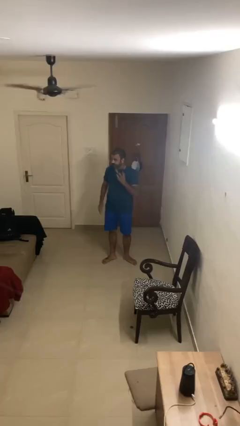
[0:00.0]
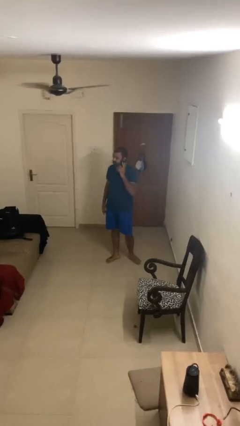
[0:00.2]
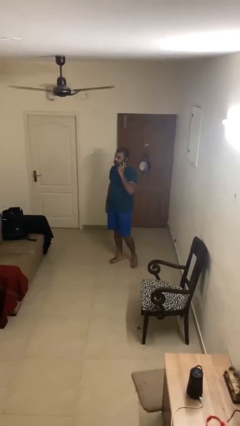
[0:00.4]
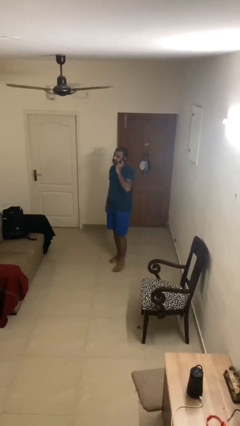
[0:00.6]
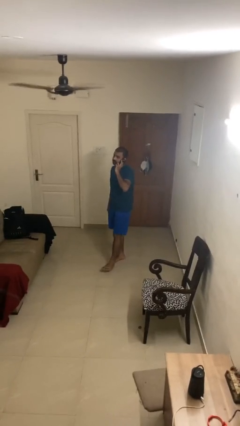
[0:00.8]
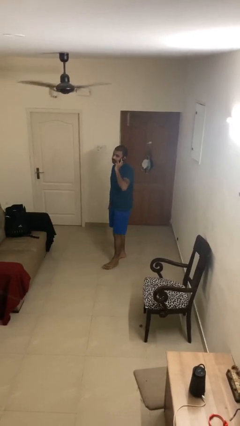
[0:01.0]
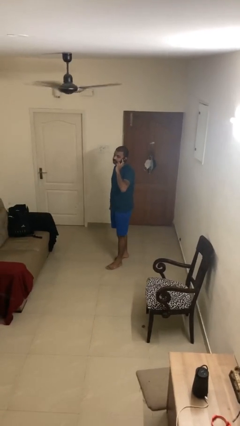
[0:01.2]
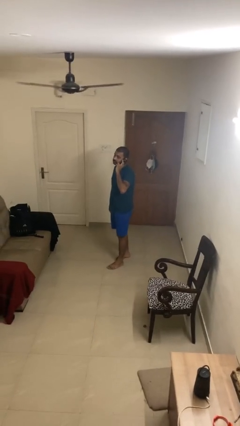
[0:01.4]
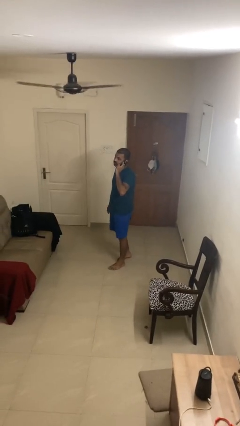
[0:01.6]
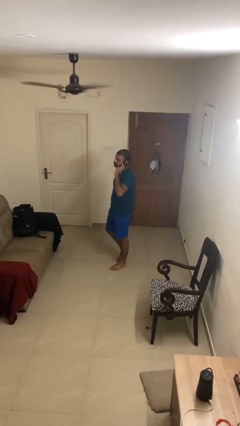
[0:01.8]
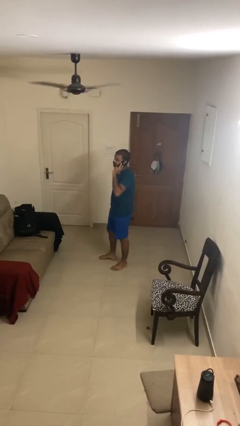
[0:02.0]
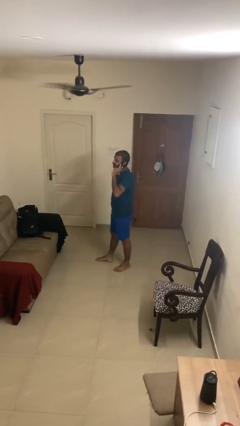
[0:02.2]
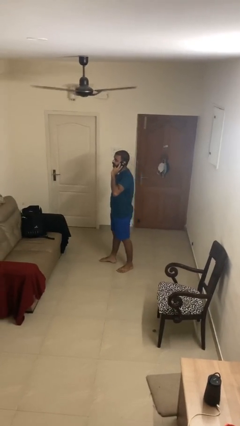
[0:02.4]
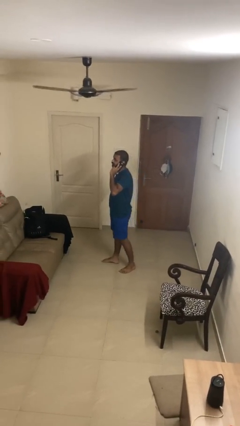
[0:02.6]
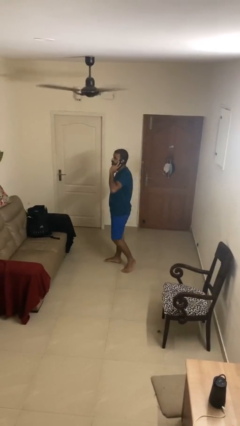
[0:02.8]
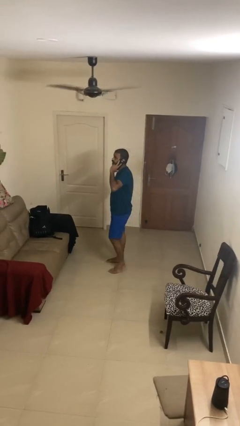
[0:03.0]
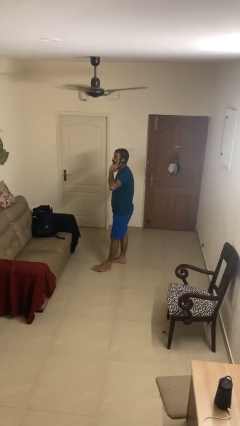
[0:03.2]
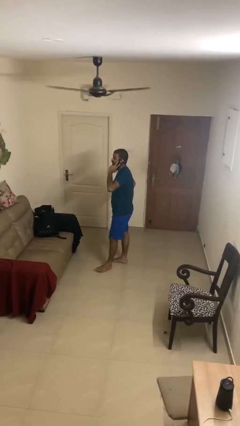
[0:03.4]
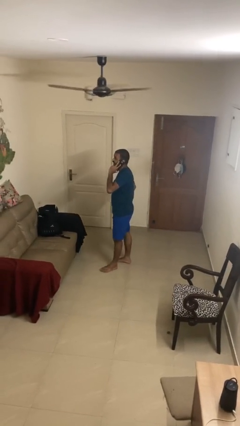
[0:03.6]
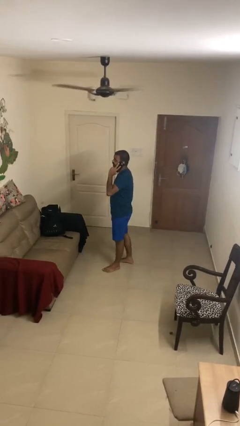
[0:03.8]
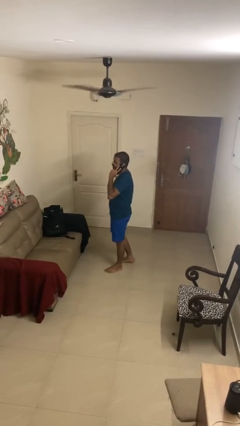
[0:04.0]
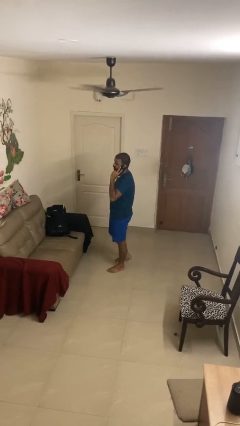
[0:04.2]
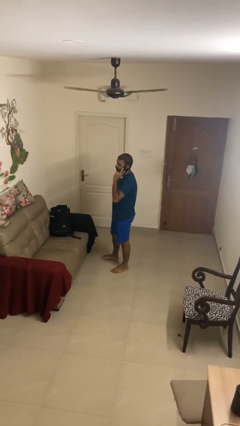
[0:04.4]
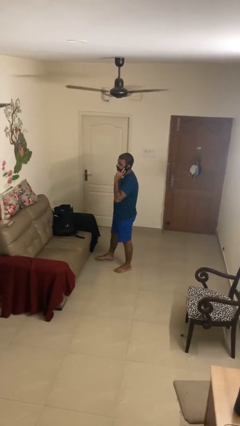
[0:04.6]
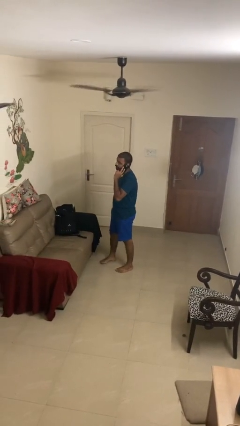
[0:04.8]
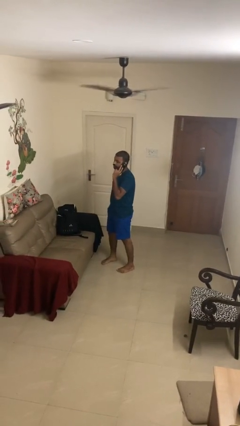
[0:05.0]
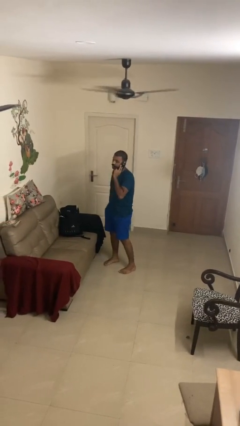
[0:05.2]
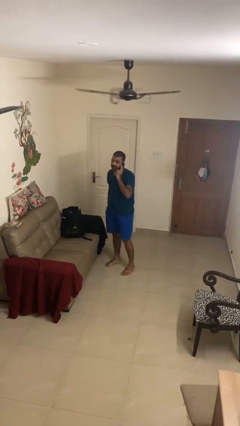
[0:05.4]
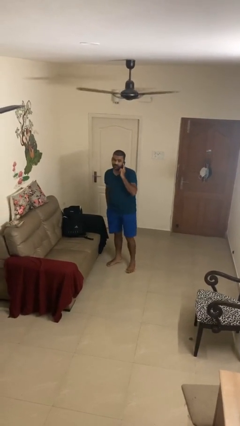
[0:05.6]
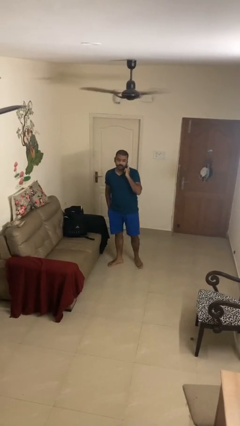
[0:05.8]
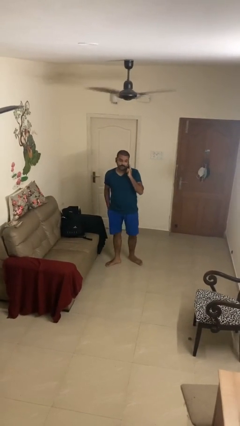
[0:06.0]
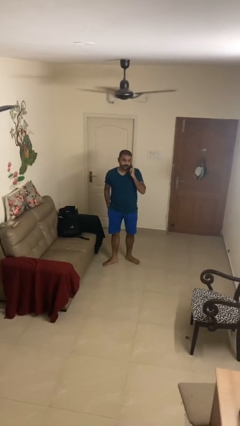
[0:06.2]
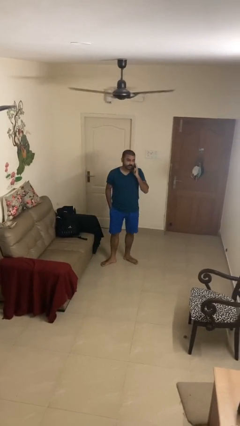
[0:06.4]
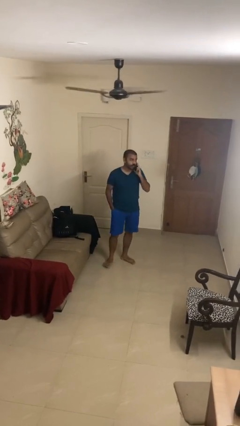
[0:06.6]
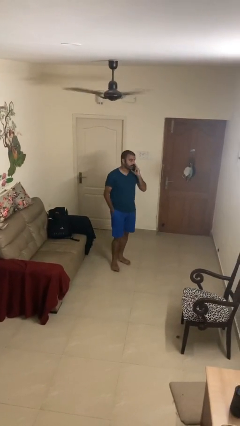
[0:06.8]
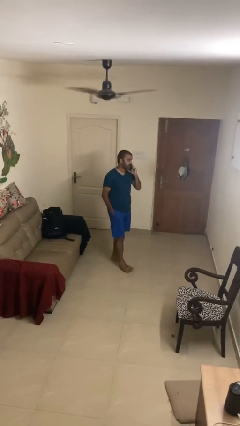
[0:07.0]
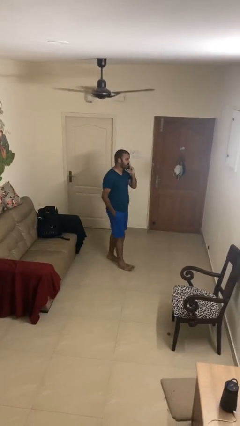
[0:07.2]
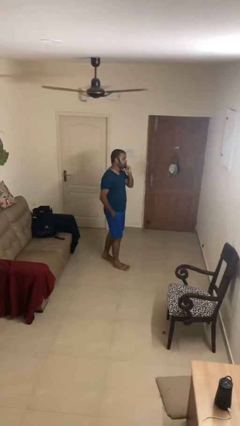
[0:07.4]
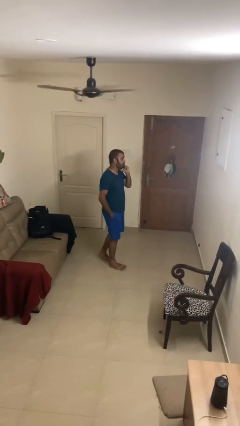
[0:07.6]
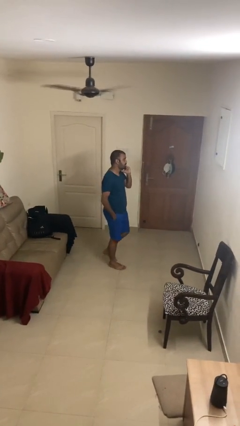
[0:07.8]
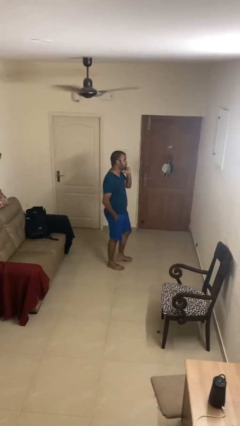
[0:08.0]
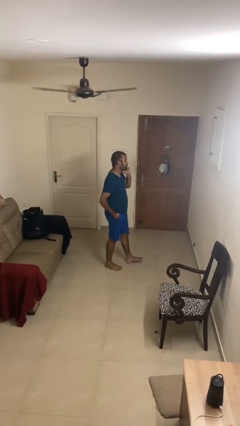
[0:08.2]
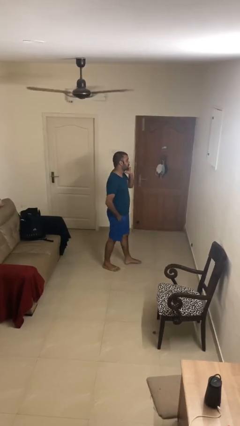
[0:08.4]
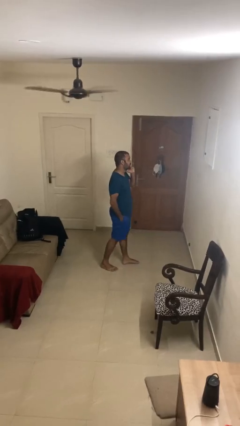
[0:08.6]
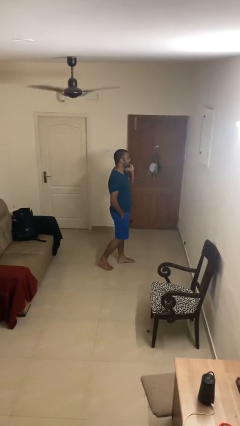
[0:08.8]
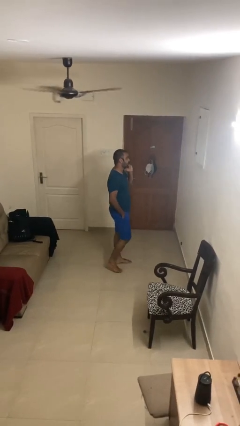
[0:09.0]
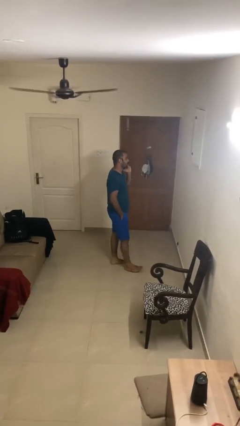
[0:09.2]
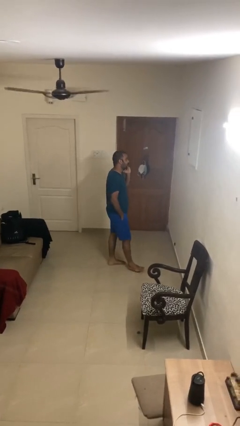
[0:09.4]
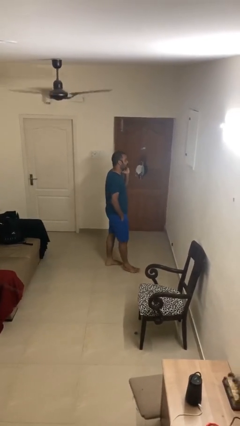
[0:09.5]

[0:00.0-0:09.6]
person talks on phone

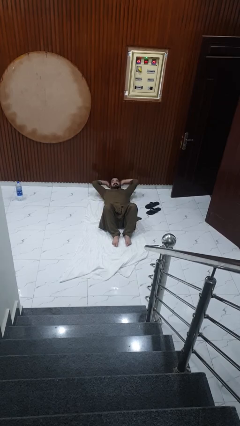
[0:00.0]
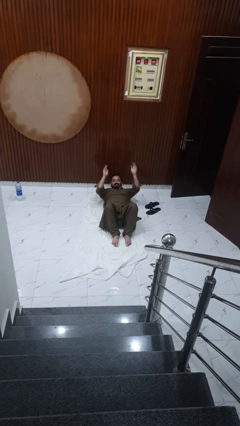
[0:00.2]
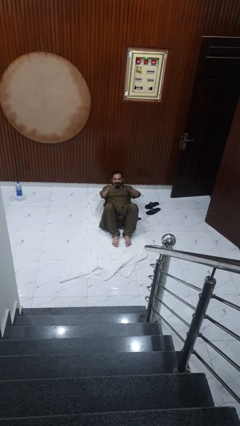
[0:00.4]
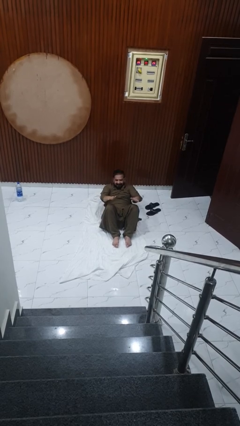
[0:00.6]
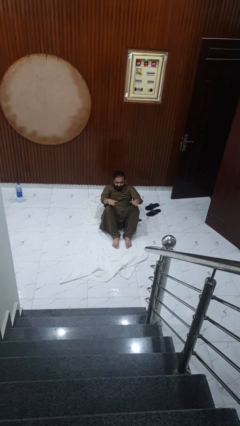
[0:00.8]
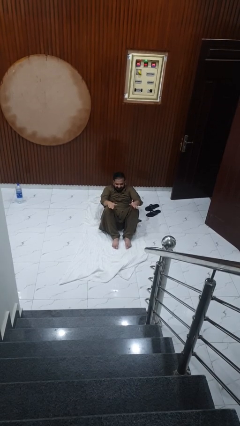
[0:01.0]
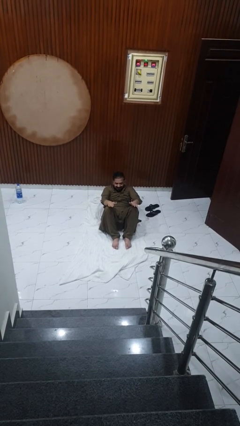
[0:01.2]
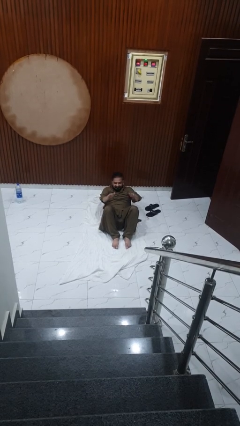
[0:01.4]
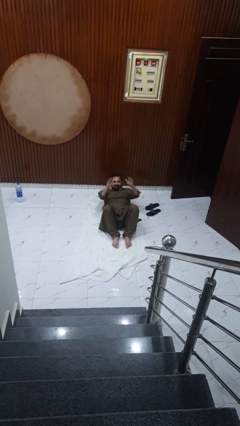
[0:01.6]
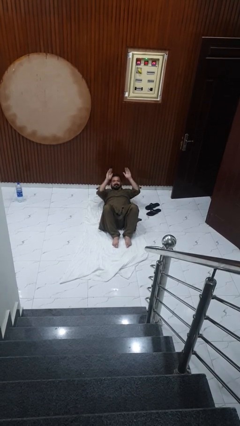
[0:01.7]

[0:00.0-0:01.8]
person exercises with situp

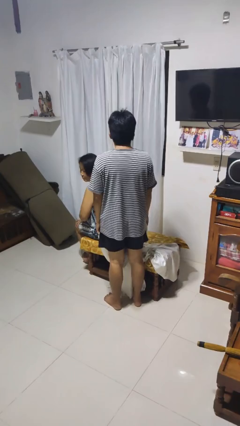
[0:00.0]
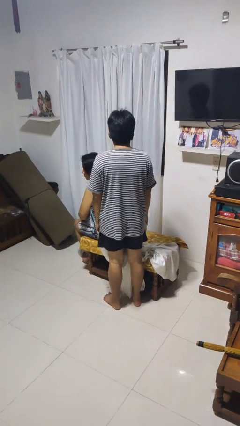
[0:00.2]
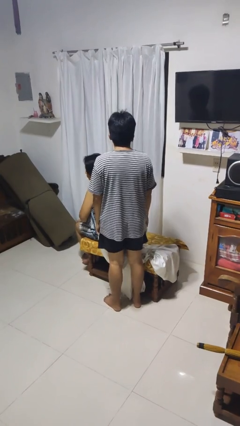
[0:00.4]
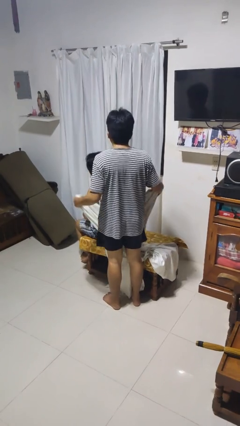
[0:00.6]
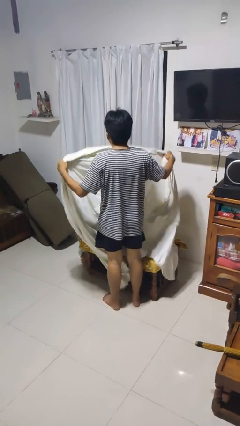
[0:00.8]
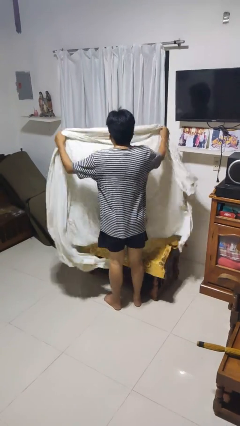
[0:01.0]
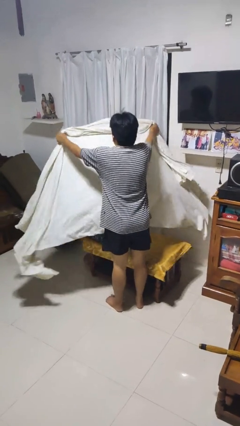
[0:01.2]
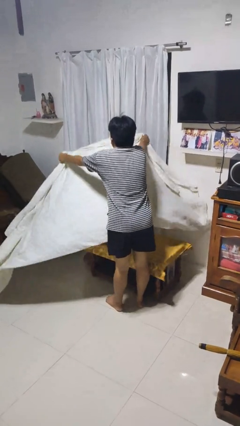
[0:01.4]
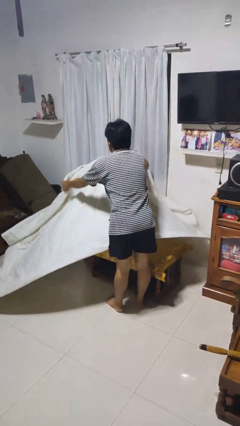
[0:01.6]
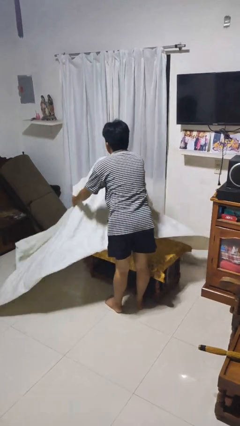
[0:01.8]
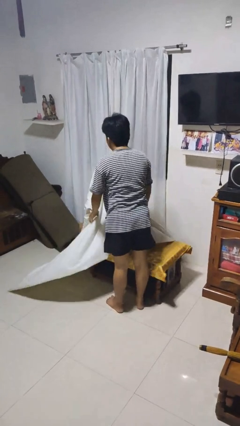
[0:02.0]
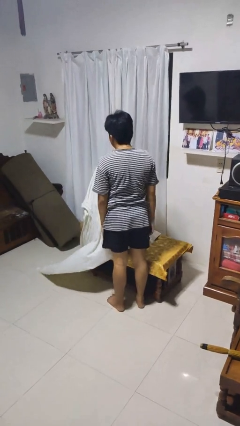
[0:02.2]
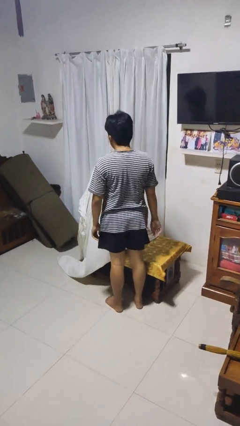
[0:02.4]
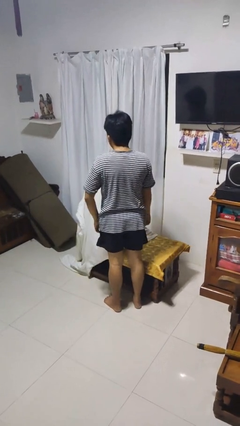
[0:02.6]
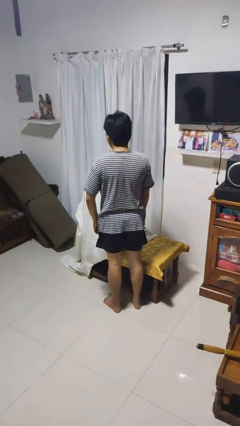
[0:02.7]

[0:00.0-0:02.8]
person covers friend with blanket

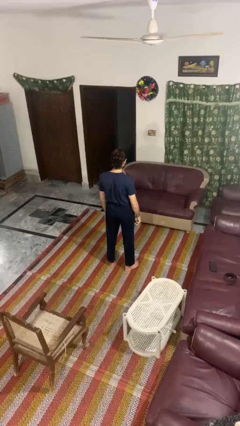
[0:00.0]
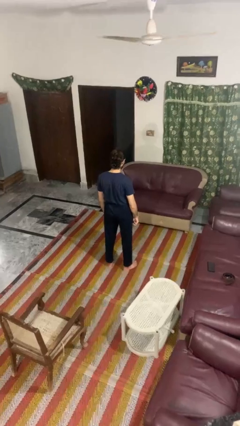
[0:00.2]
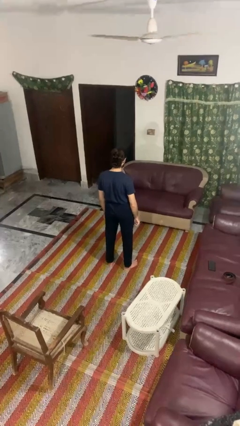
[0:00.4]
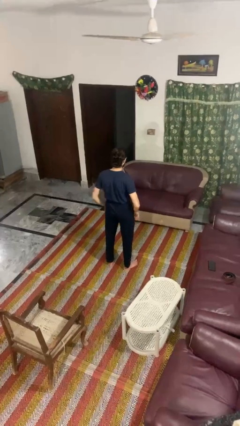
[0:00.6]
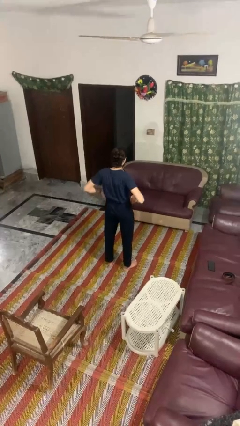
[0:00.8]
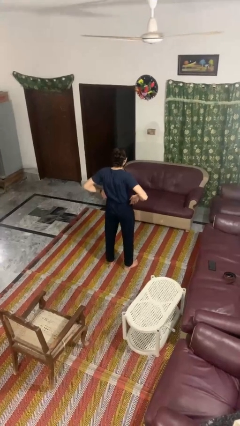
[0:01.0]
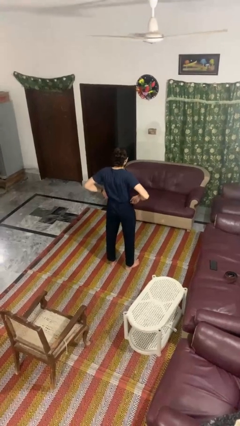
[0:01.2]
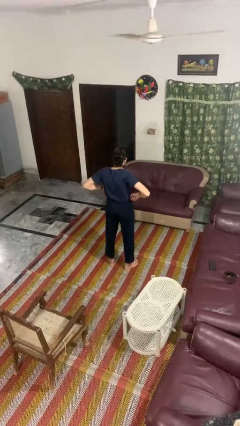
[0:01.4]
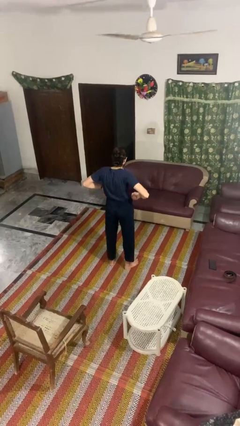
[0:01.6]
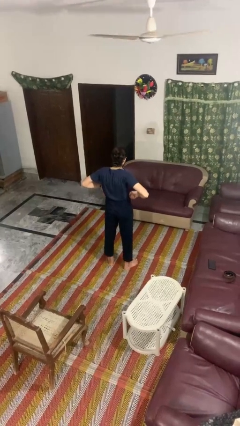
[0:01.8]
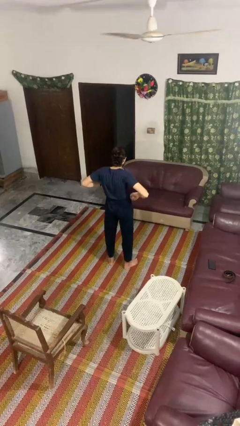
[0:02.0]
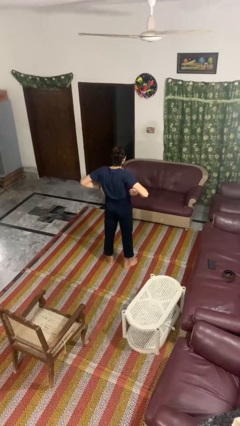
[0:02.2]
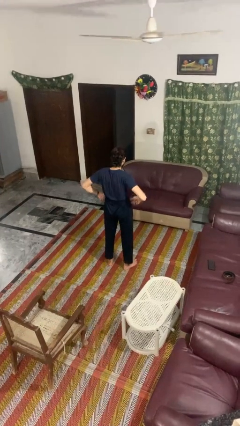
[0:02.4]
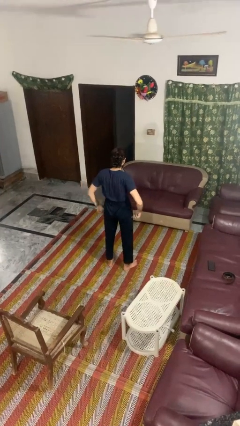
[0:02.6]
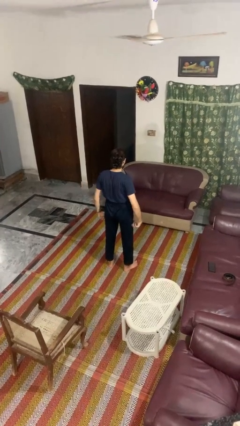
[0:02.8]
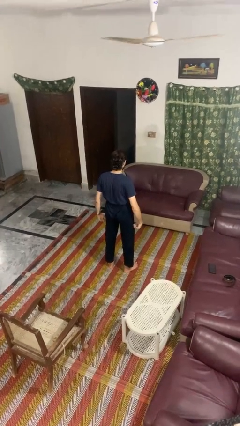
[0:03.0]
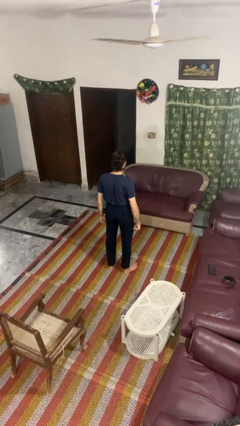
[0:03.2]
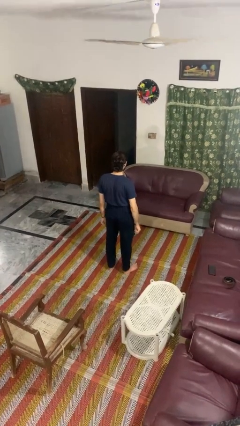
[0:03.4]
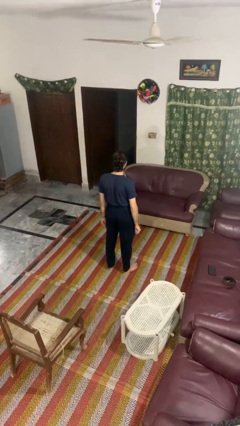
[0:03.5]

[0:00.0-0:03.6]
person hikes up pants
